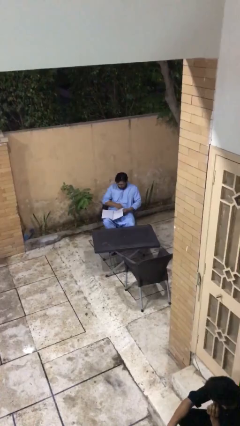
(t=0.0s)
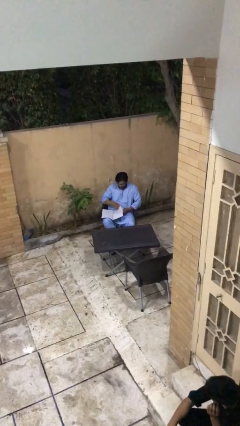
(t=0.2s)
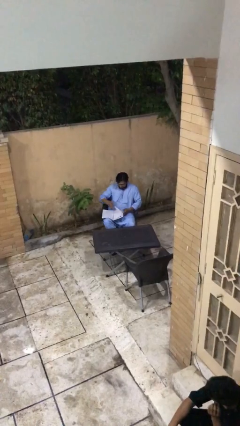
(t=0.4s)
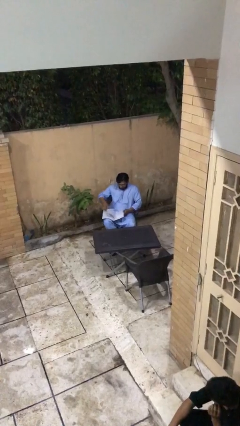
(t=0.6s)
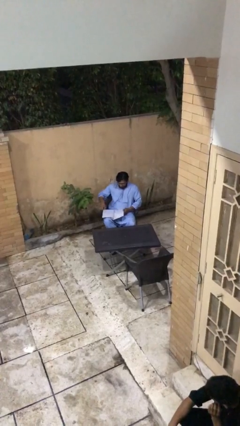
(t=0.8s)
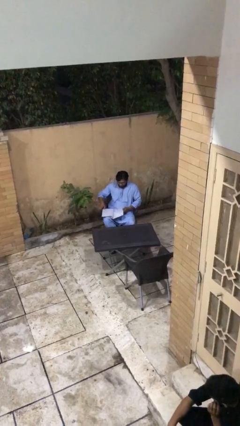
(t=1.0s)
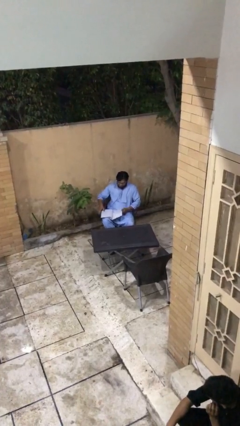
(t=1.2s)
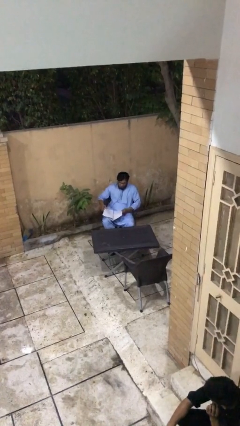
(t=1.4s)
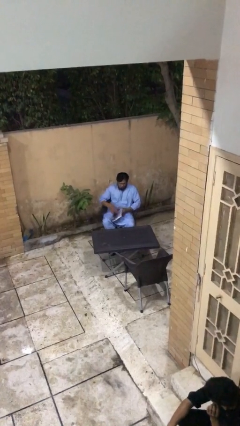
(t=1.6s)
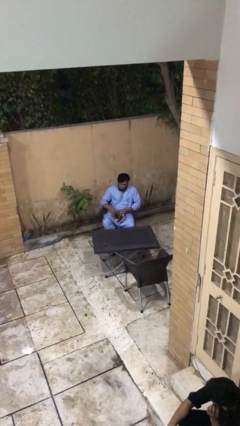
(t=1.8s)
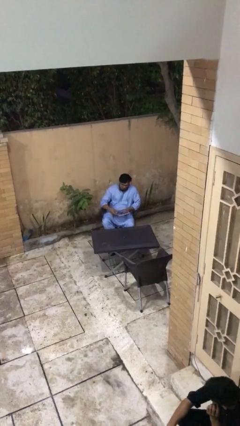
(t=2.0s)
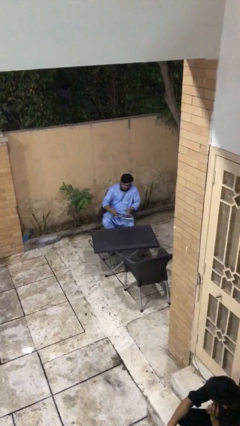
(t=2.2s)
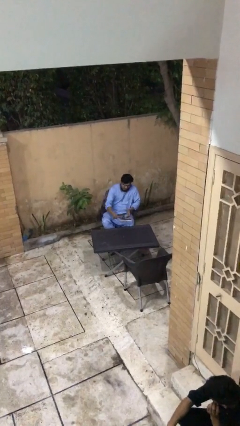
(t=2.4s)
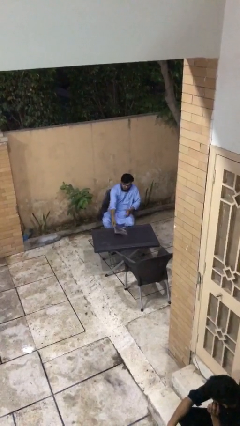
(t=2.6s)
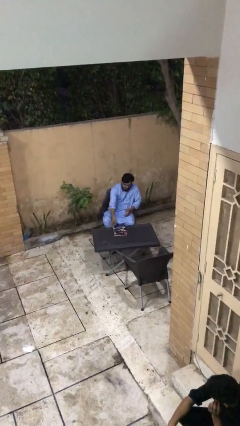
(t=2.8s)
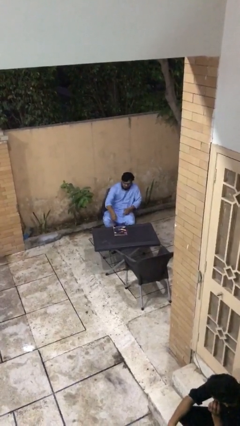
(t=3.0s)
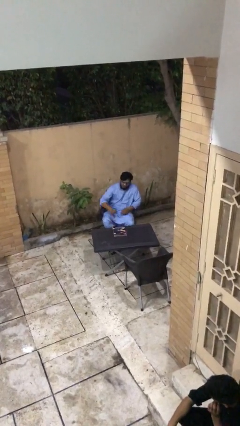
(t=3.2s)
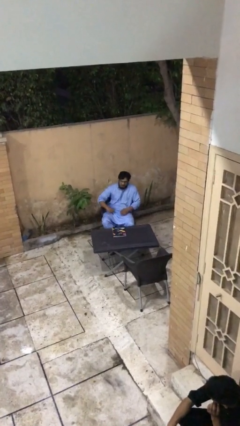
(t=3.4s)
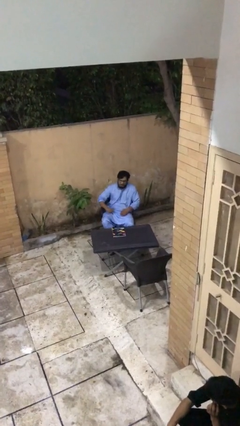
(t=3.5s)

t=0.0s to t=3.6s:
person puts down object on table

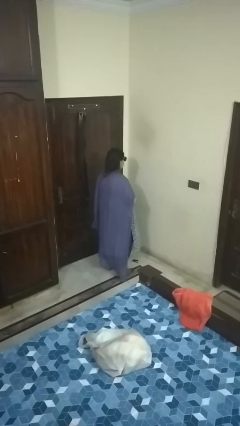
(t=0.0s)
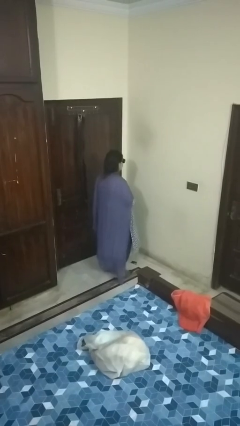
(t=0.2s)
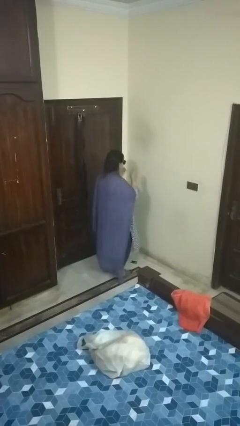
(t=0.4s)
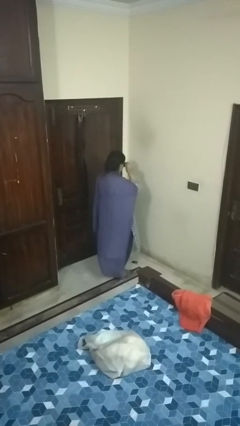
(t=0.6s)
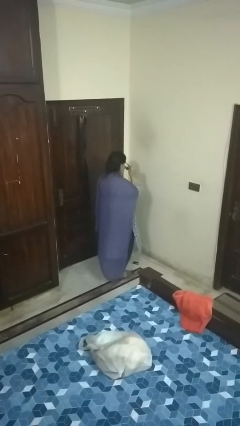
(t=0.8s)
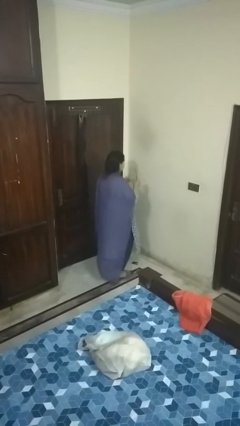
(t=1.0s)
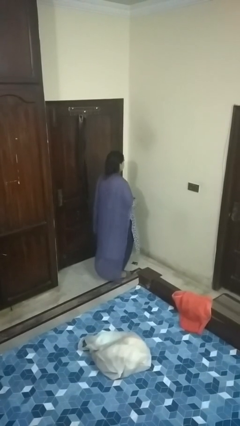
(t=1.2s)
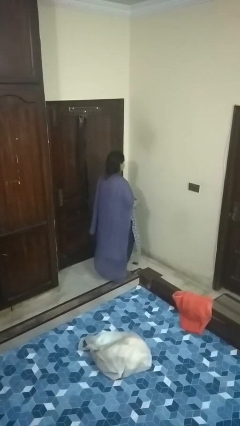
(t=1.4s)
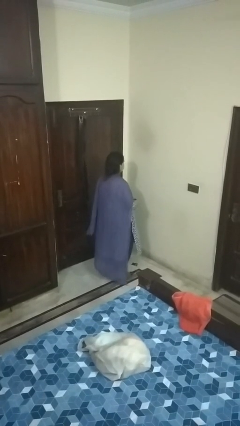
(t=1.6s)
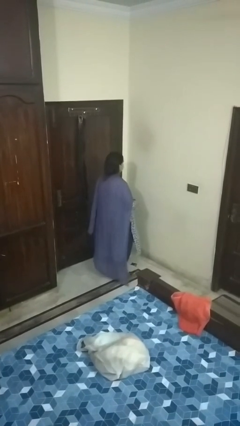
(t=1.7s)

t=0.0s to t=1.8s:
person takes off sunglasses

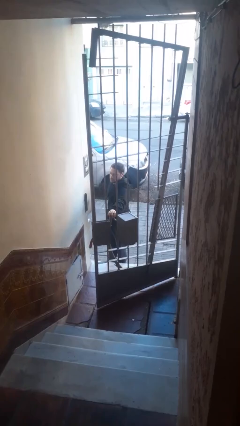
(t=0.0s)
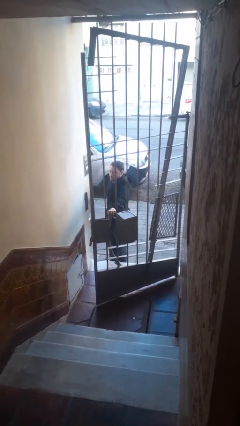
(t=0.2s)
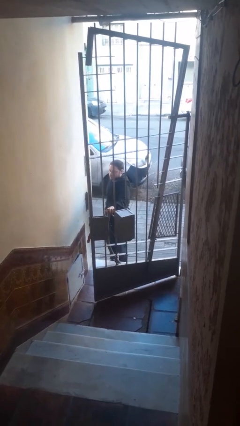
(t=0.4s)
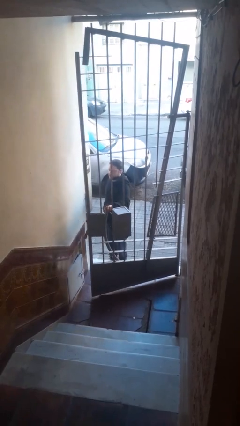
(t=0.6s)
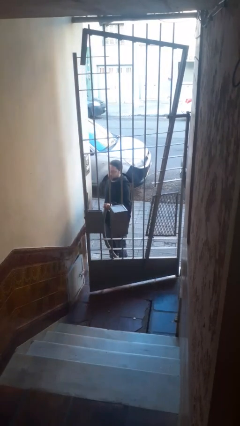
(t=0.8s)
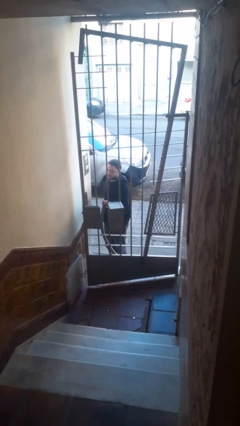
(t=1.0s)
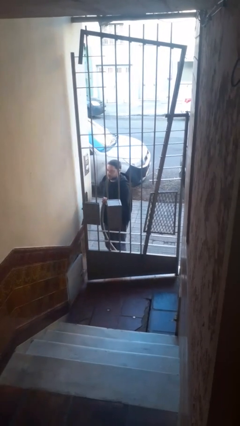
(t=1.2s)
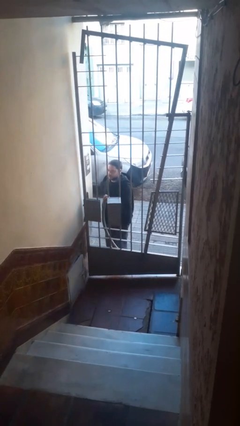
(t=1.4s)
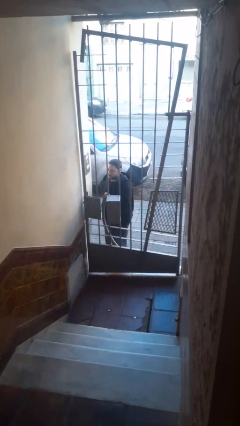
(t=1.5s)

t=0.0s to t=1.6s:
person closes gate

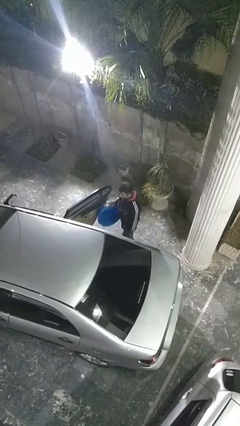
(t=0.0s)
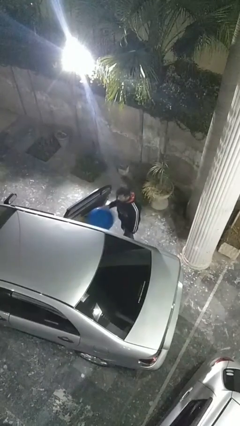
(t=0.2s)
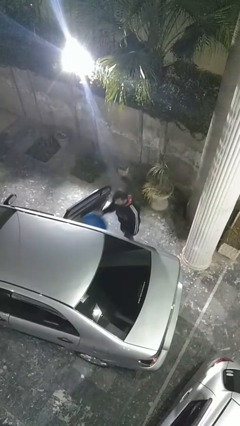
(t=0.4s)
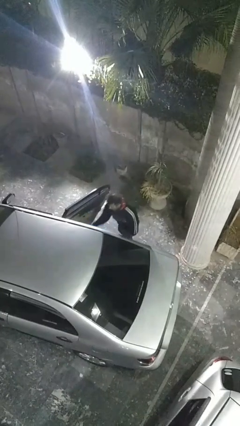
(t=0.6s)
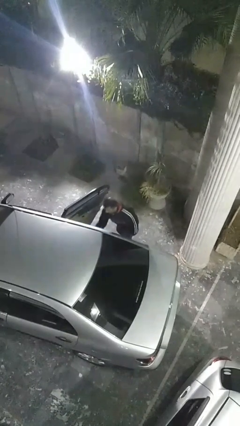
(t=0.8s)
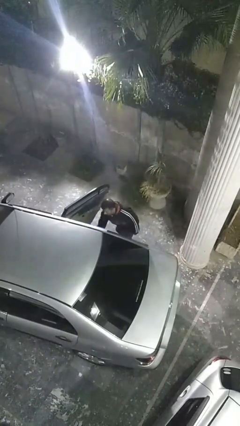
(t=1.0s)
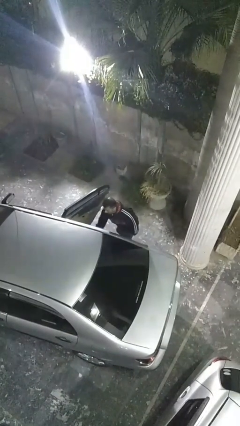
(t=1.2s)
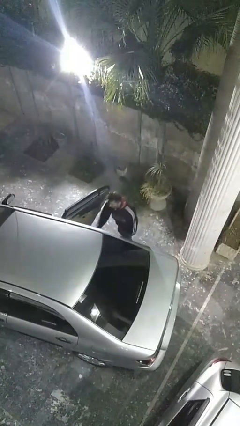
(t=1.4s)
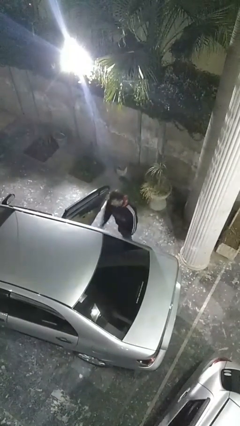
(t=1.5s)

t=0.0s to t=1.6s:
person loads car

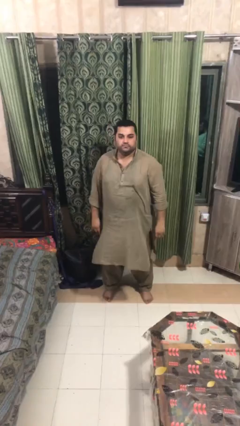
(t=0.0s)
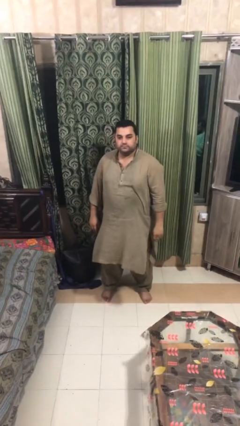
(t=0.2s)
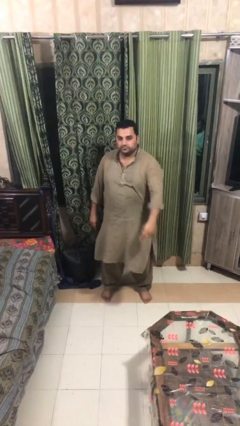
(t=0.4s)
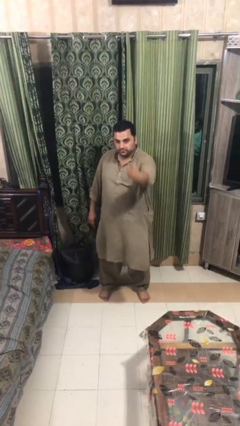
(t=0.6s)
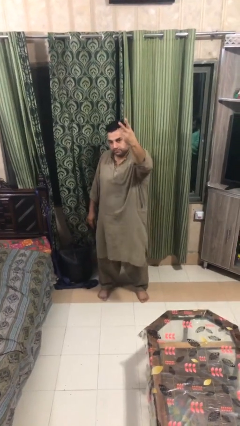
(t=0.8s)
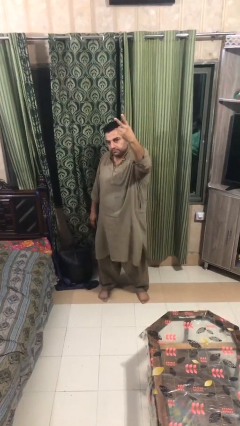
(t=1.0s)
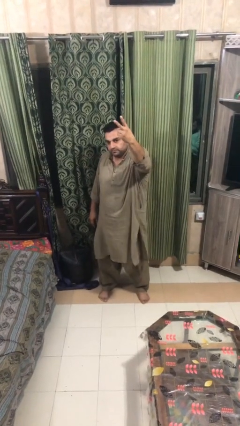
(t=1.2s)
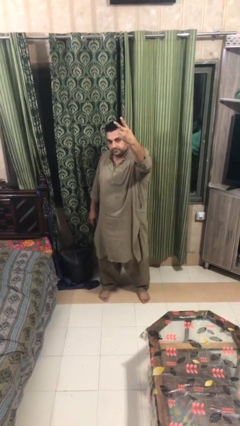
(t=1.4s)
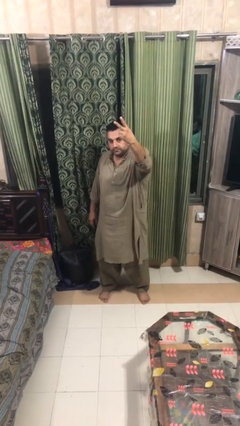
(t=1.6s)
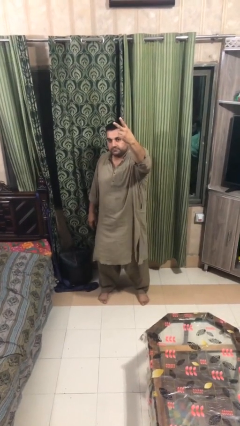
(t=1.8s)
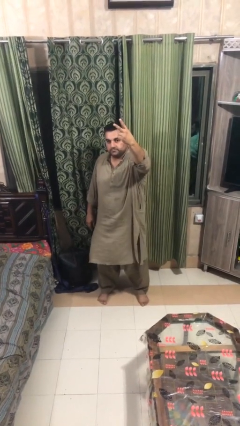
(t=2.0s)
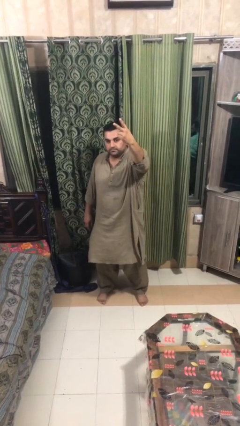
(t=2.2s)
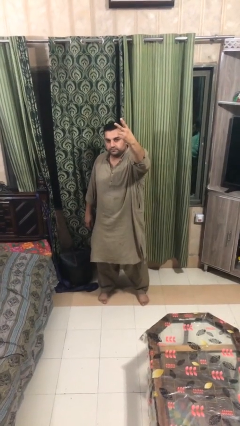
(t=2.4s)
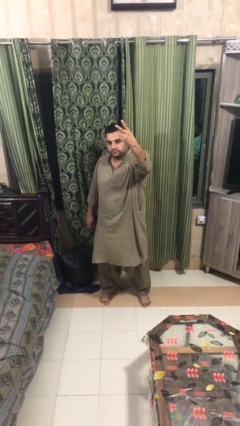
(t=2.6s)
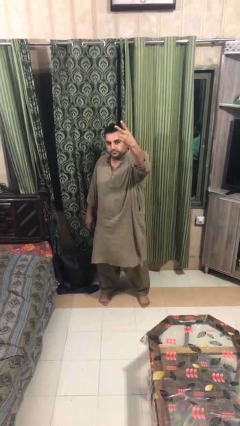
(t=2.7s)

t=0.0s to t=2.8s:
person gestures peace

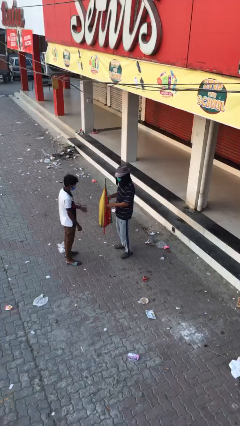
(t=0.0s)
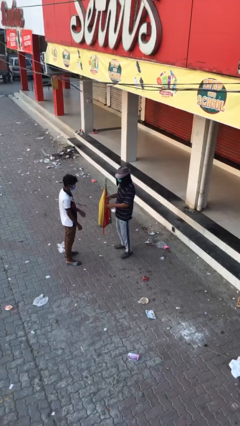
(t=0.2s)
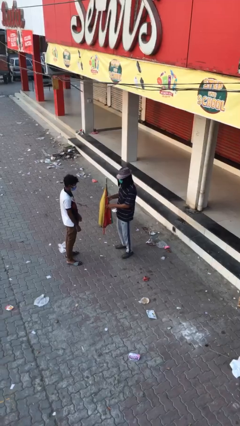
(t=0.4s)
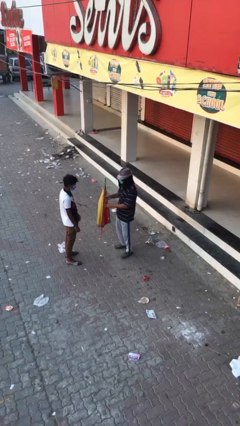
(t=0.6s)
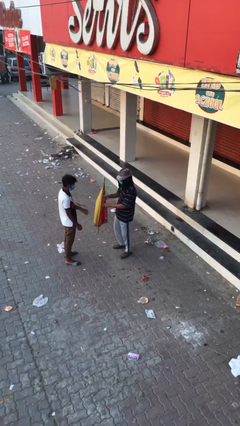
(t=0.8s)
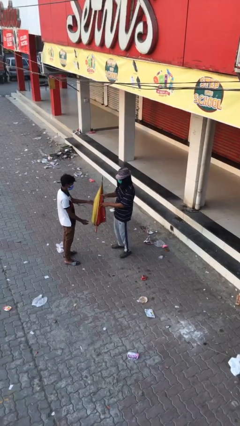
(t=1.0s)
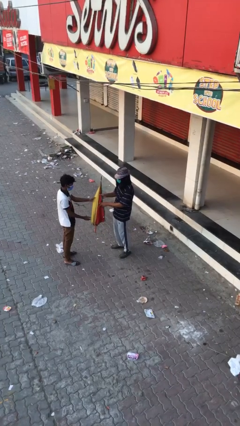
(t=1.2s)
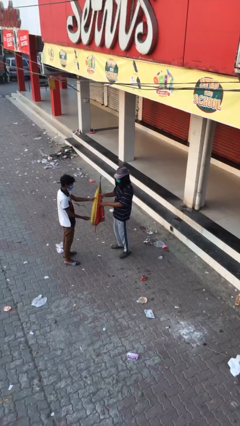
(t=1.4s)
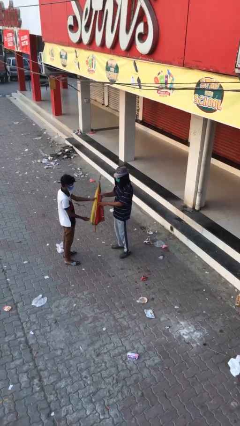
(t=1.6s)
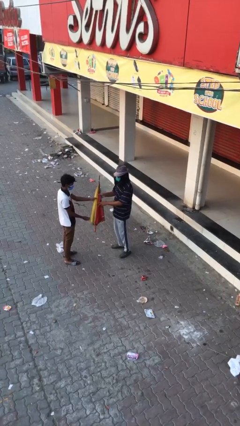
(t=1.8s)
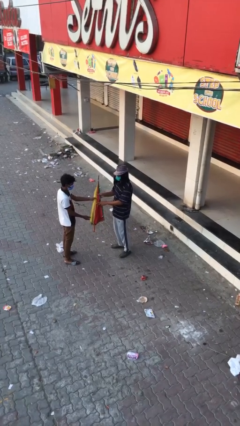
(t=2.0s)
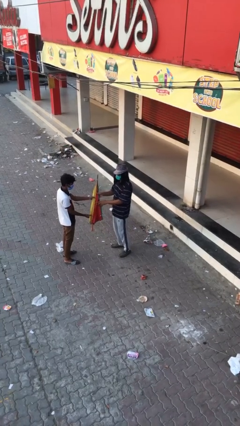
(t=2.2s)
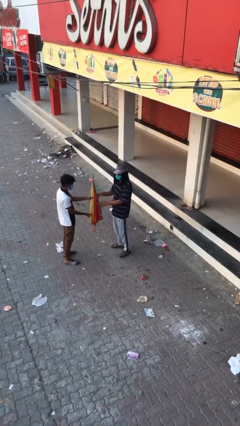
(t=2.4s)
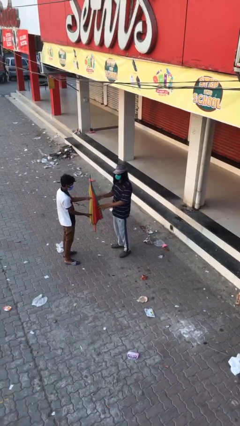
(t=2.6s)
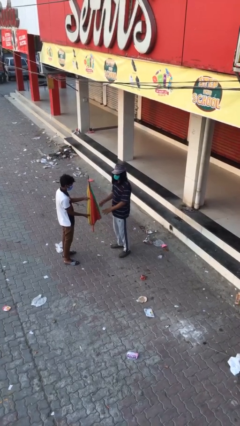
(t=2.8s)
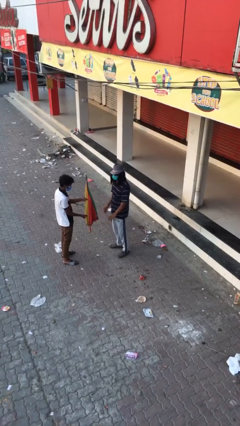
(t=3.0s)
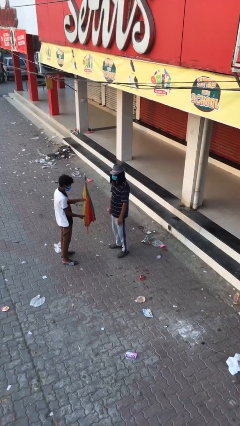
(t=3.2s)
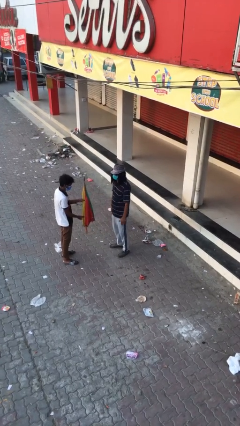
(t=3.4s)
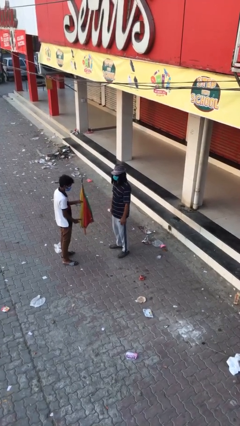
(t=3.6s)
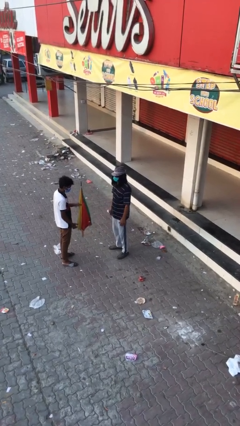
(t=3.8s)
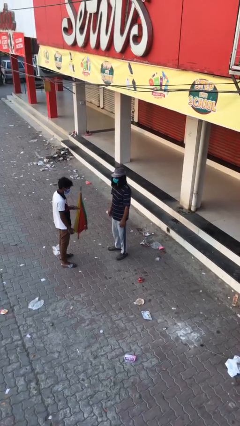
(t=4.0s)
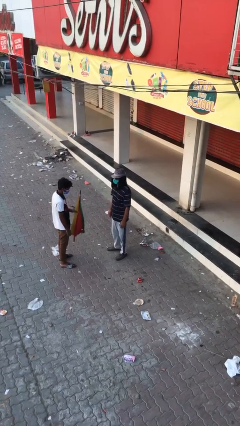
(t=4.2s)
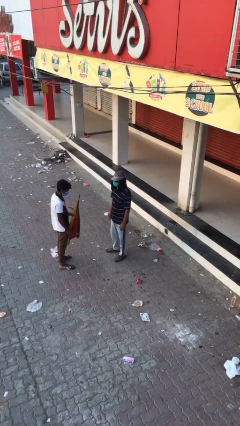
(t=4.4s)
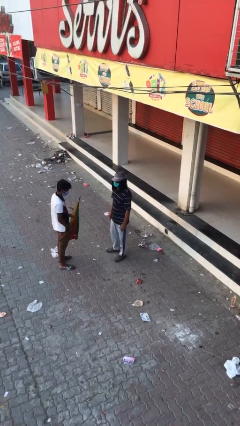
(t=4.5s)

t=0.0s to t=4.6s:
person transfers object to person

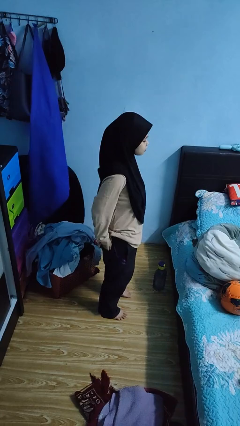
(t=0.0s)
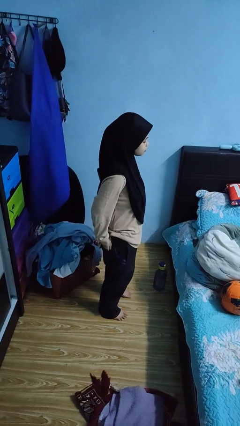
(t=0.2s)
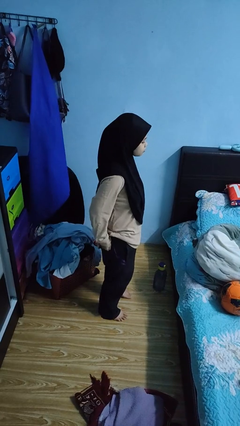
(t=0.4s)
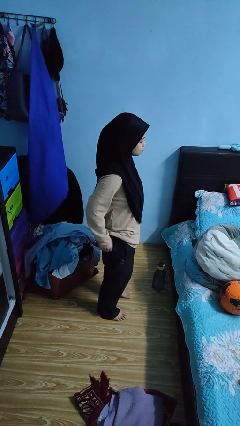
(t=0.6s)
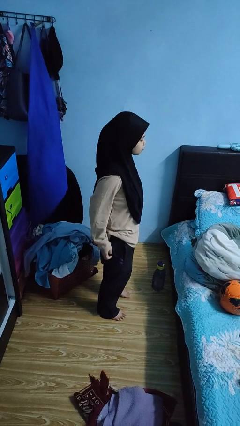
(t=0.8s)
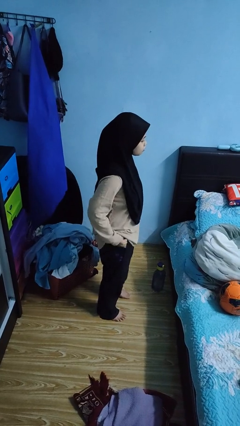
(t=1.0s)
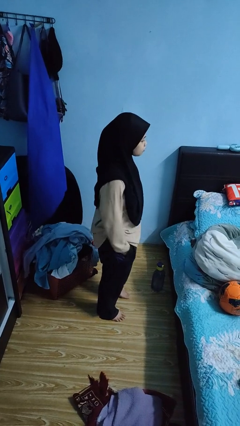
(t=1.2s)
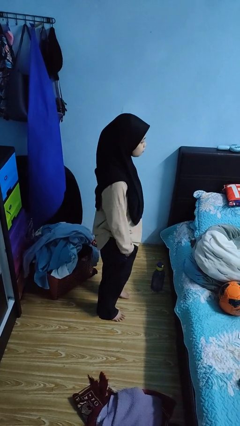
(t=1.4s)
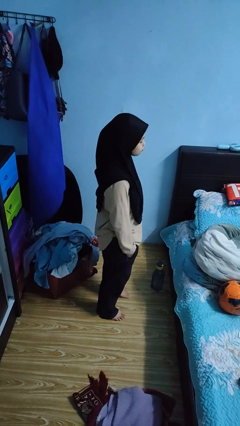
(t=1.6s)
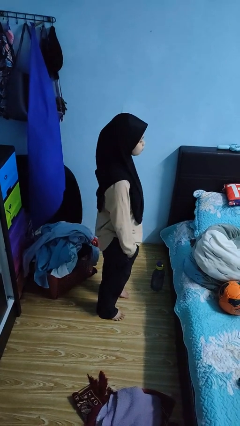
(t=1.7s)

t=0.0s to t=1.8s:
person puts hands in back pockets
